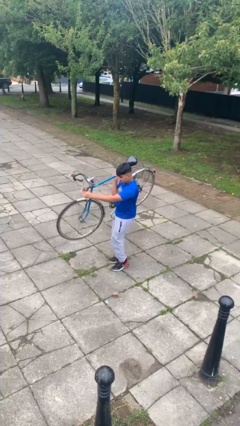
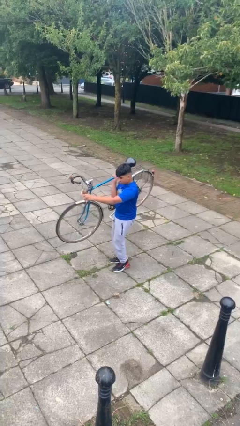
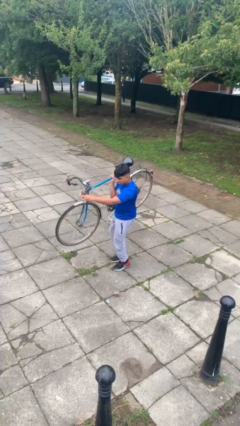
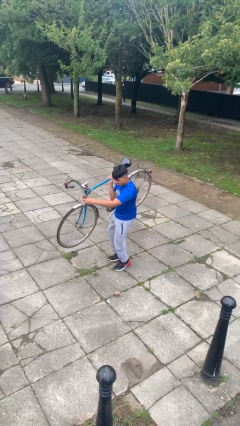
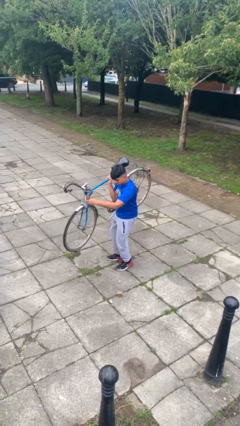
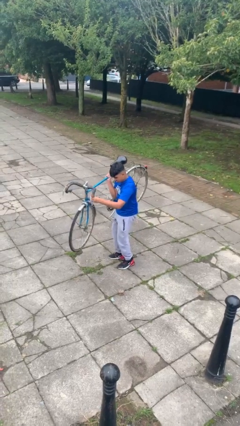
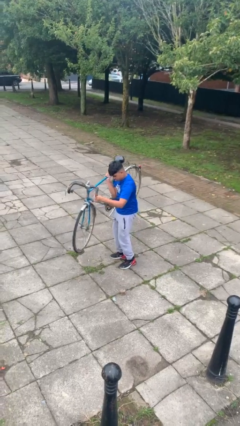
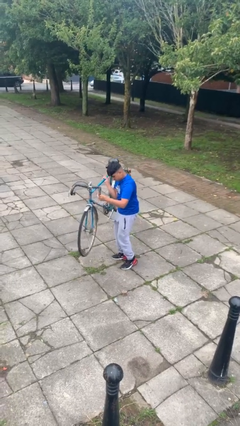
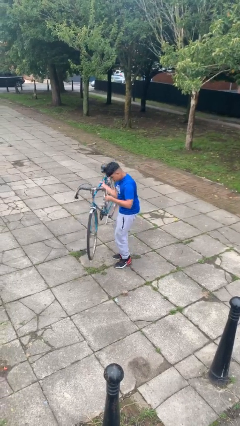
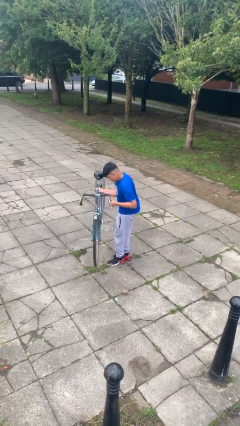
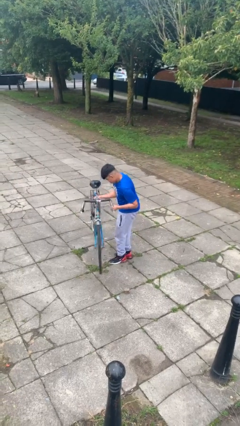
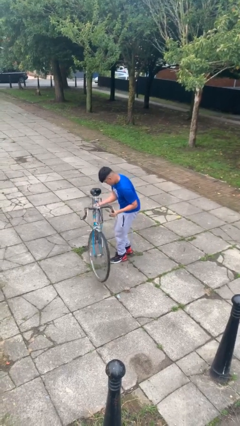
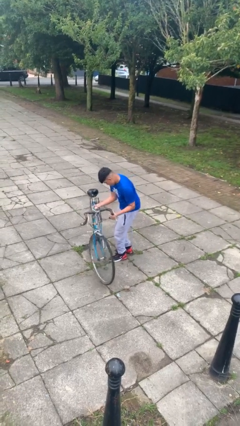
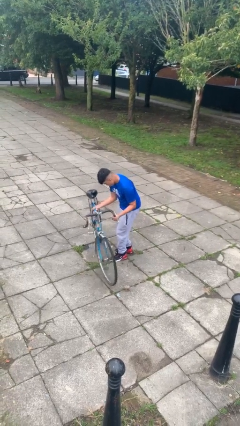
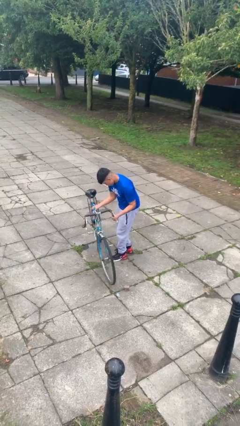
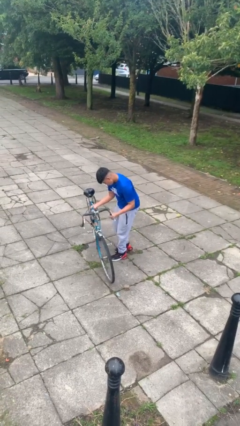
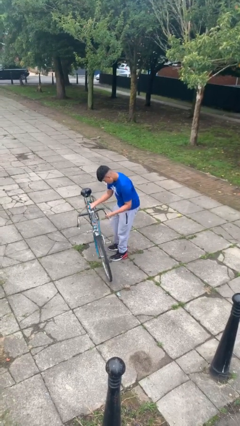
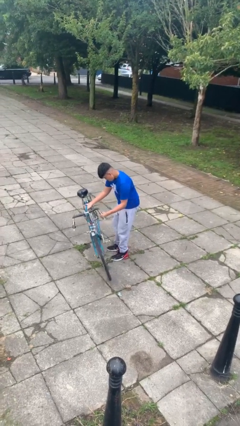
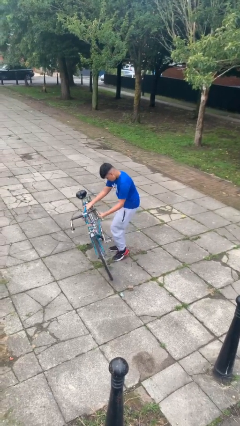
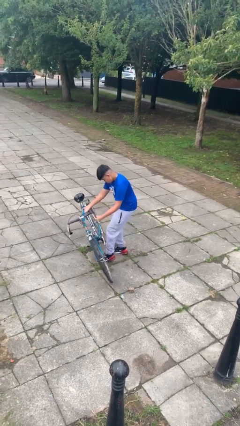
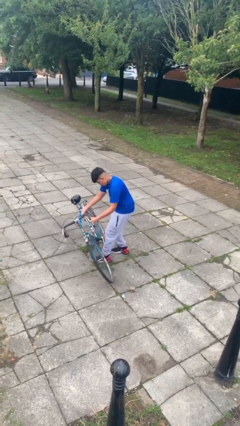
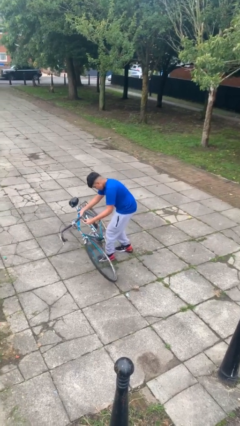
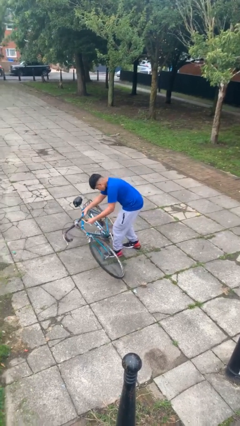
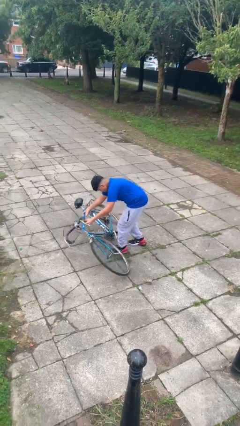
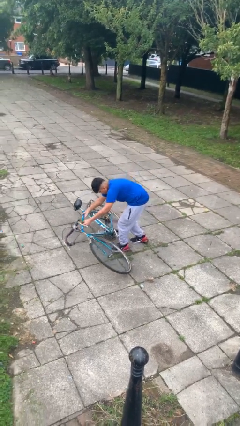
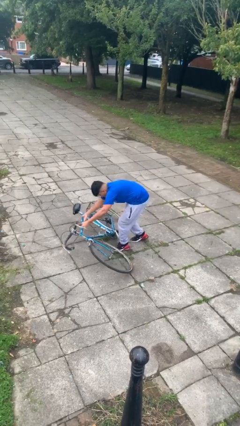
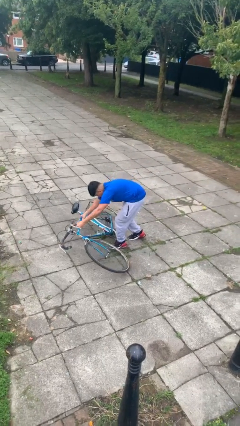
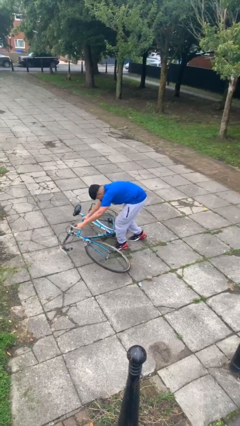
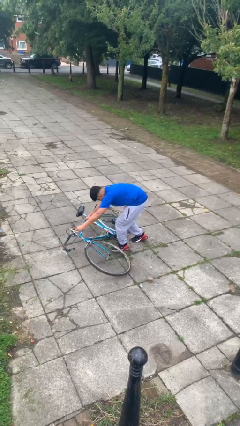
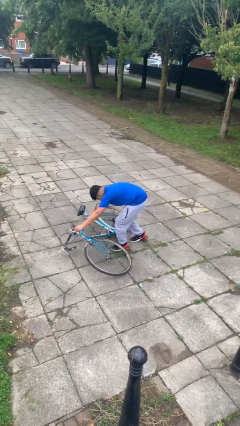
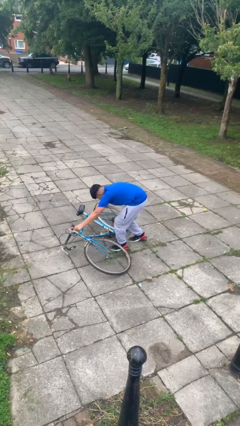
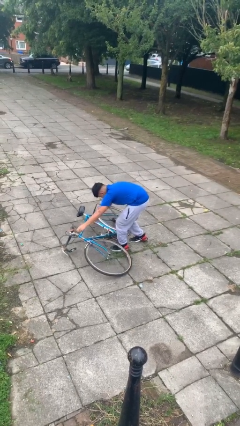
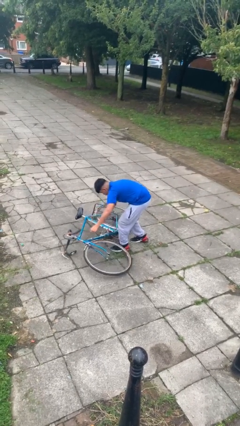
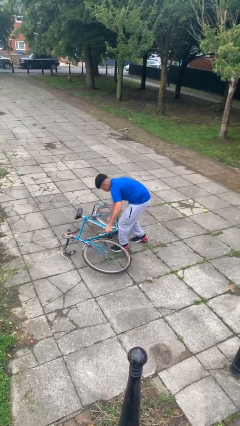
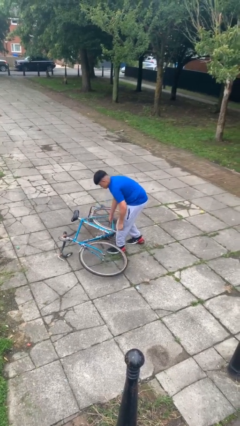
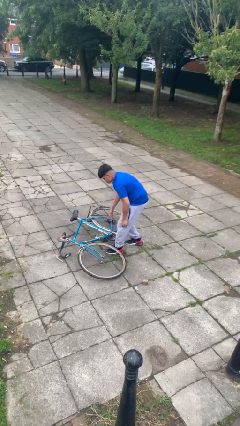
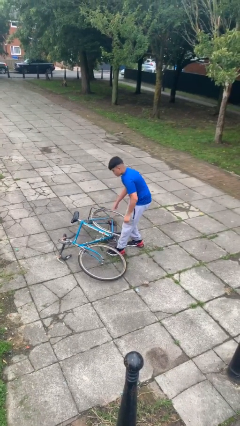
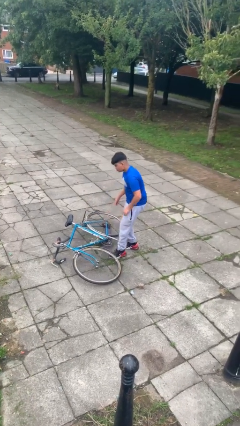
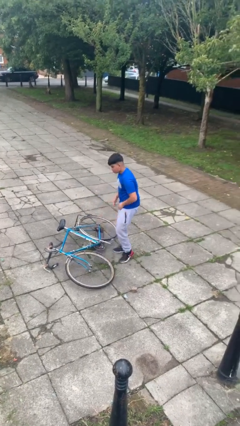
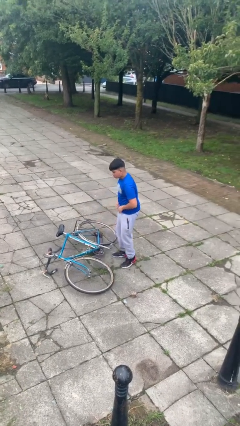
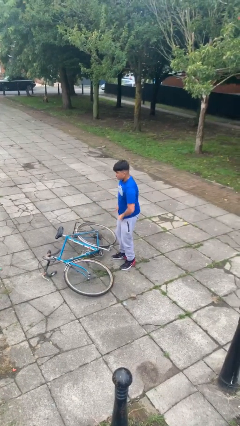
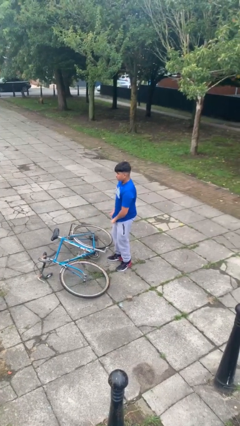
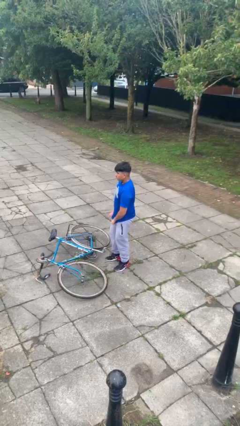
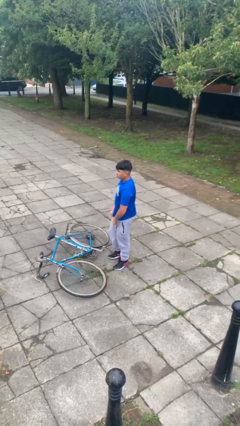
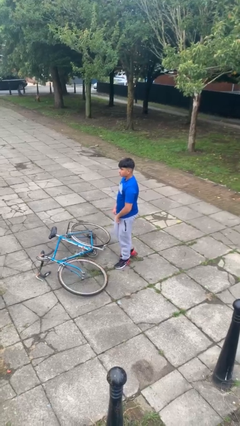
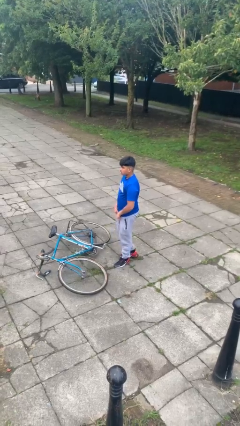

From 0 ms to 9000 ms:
person puts down object on floor

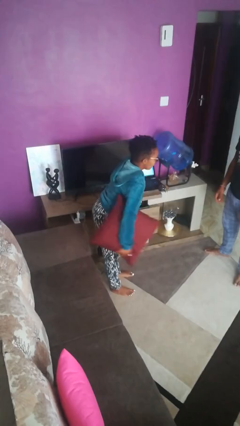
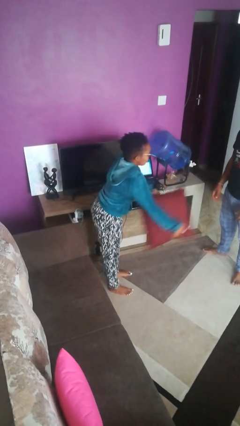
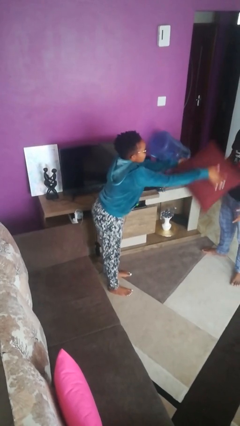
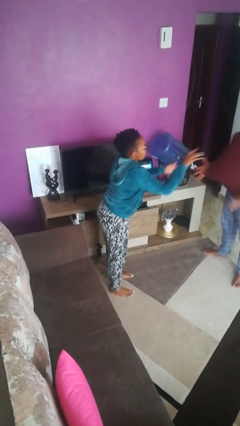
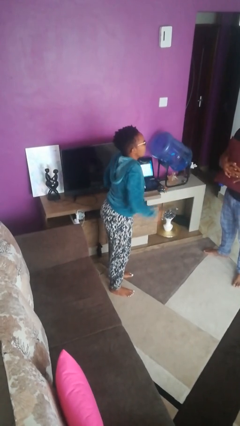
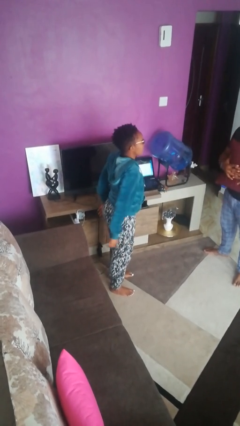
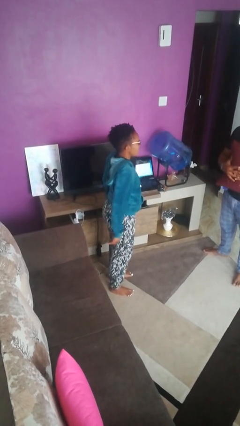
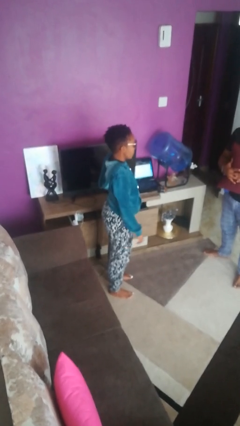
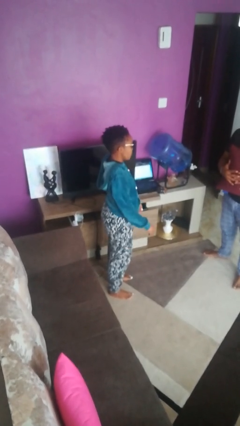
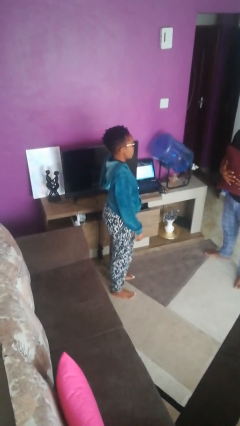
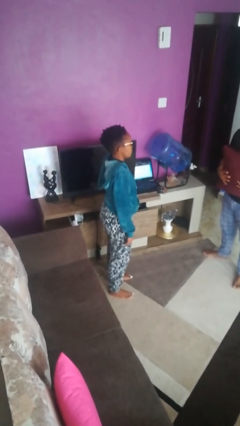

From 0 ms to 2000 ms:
person throws object to person

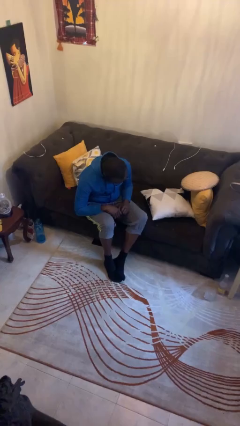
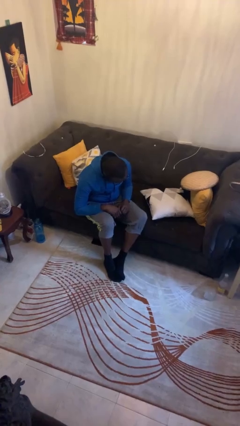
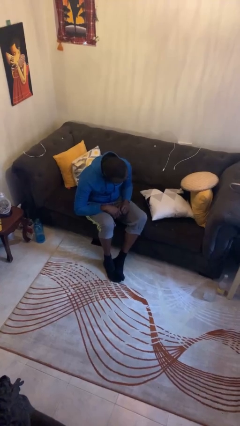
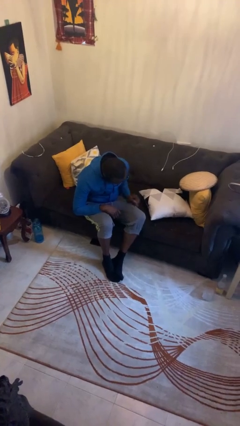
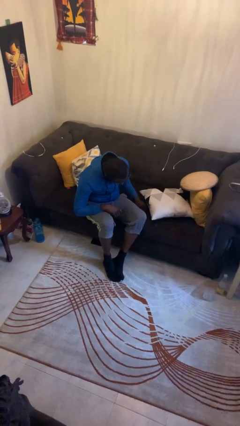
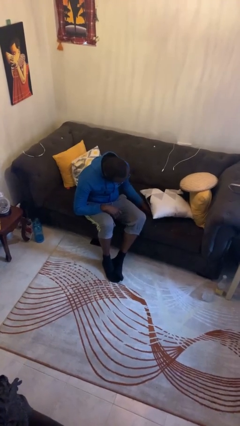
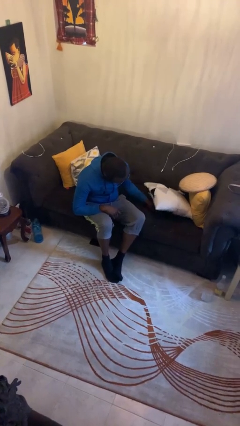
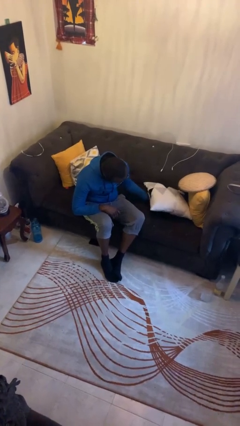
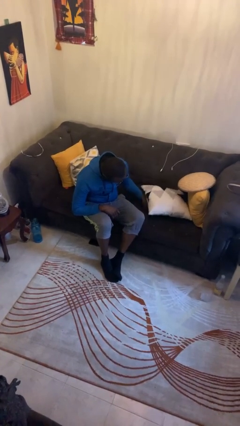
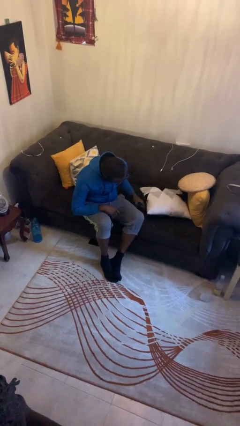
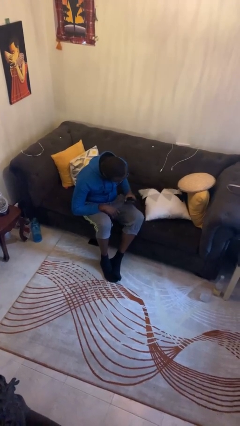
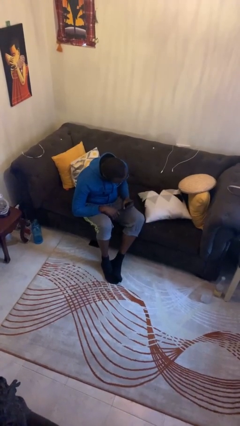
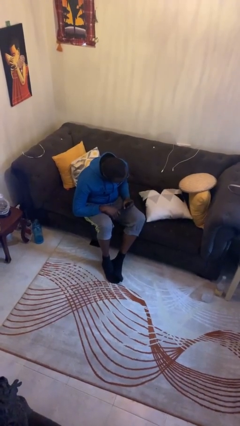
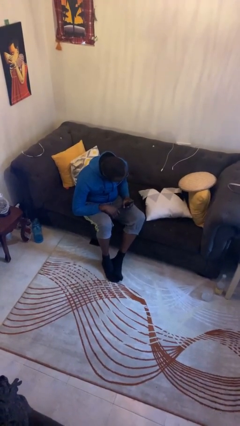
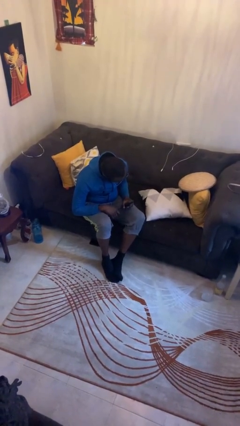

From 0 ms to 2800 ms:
person searches in couch

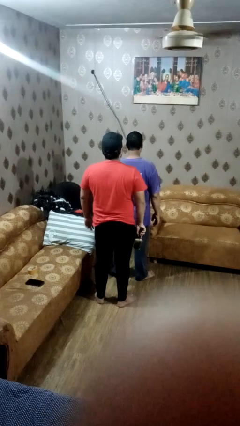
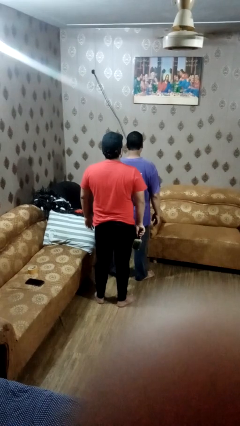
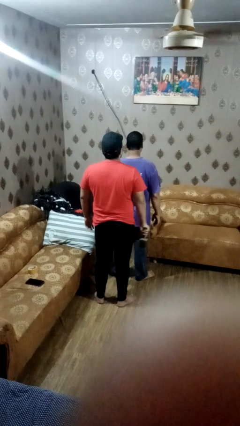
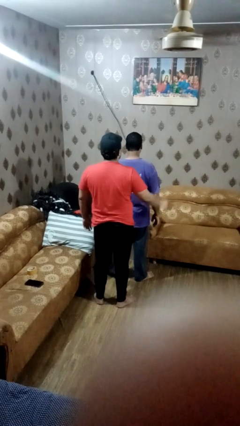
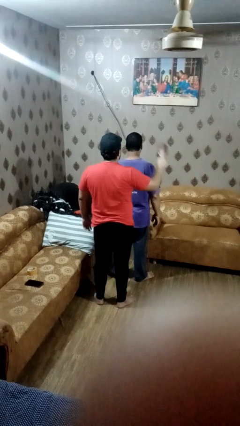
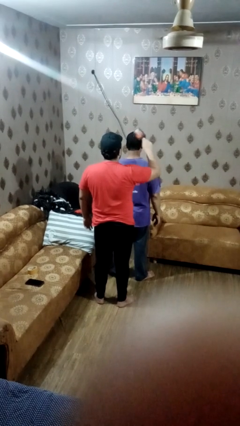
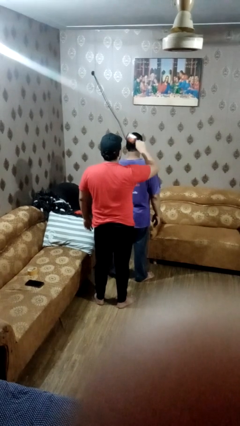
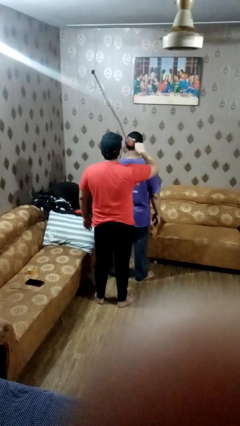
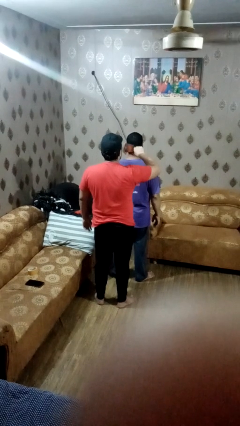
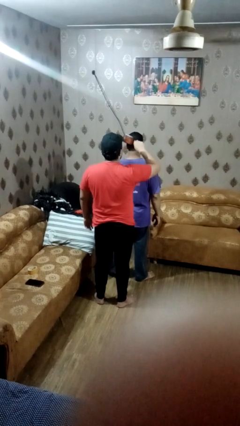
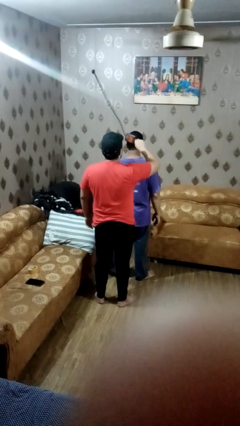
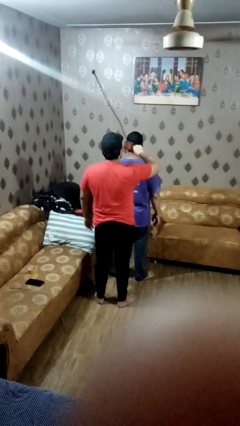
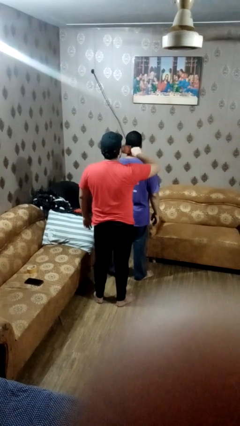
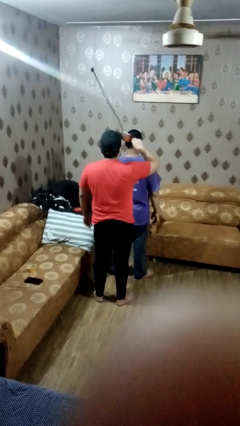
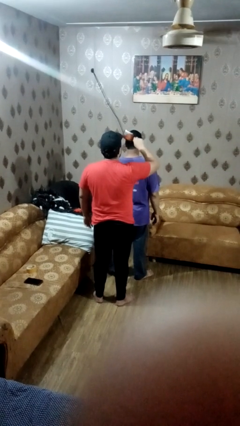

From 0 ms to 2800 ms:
person brushes hair of person

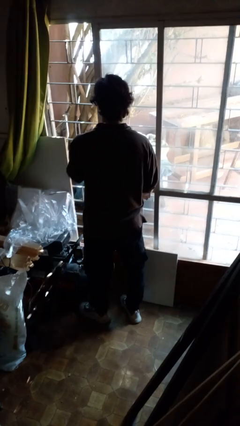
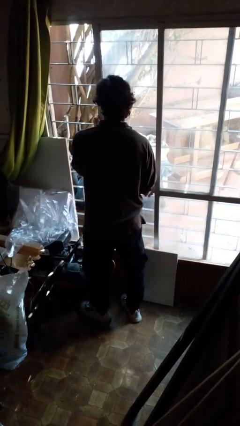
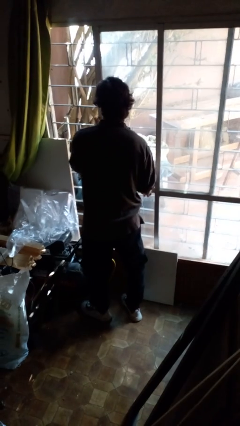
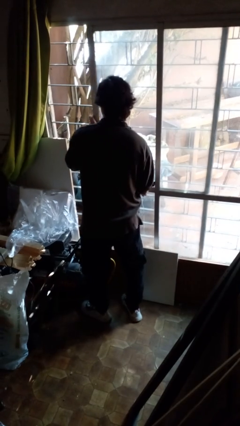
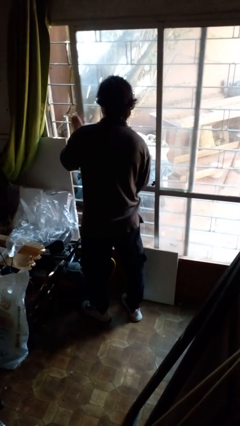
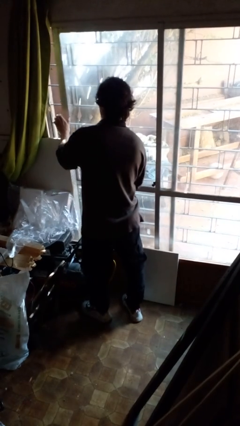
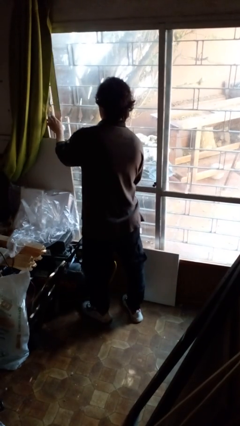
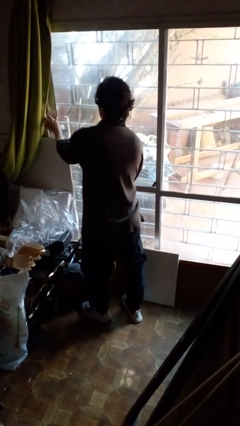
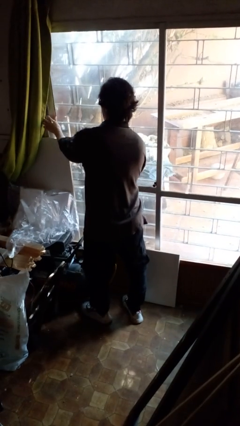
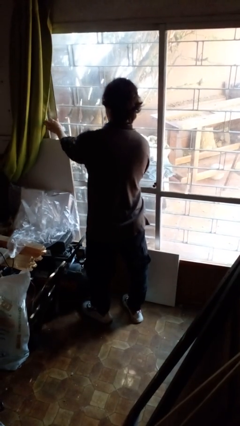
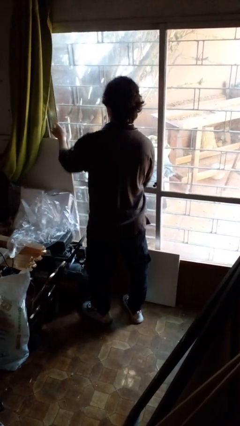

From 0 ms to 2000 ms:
person closes sliding door
